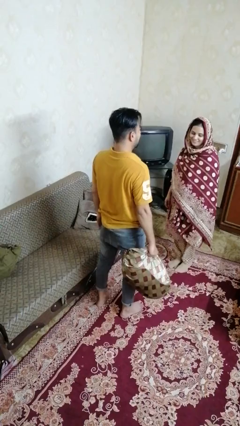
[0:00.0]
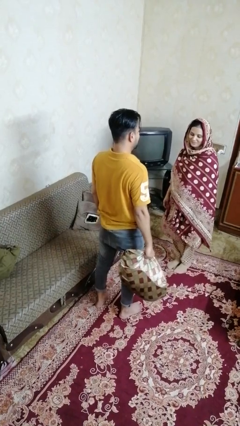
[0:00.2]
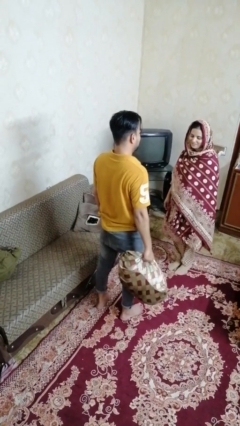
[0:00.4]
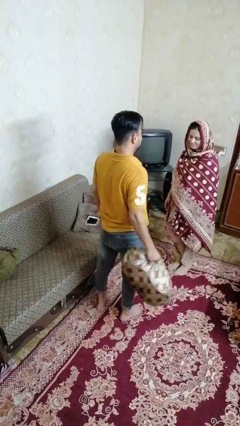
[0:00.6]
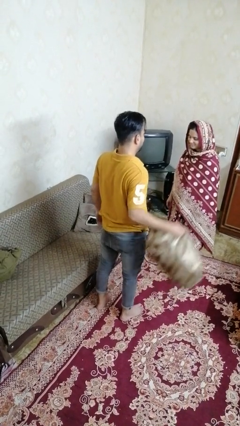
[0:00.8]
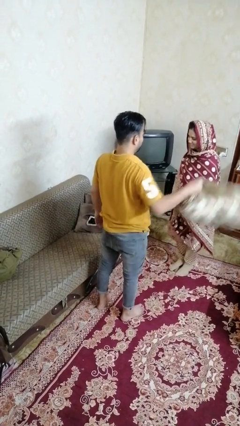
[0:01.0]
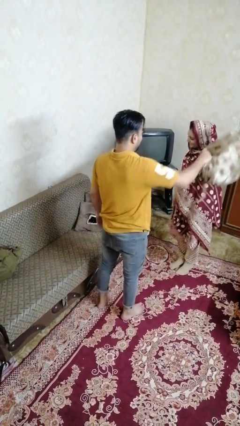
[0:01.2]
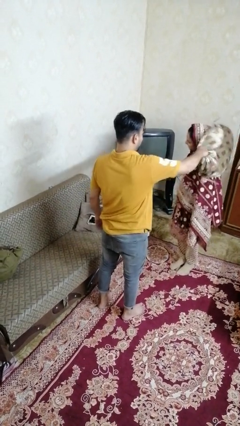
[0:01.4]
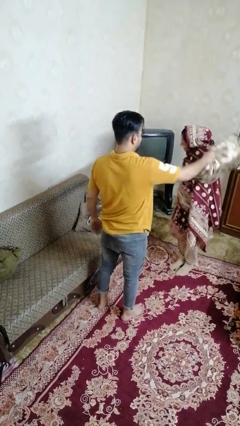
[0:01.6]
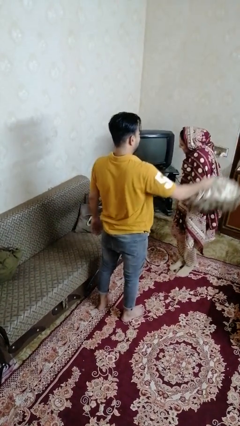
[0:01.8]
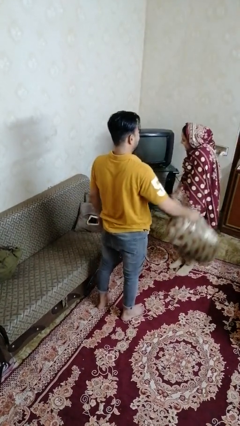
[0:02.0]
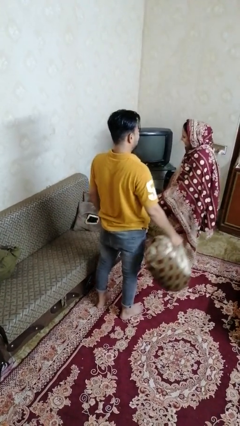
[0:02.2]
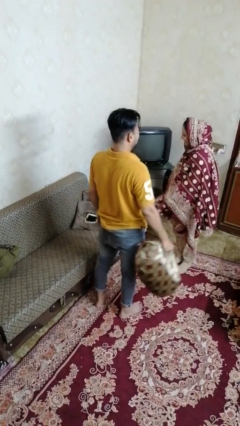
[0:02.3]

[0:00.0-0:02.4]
person hits person with pillow

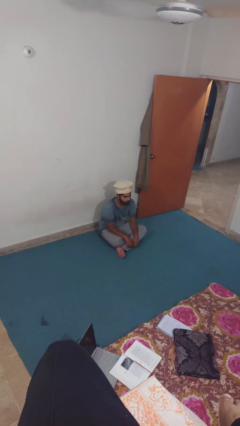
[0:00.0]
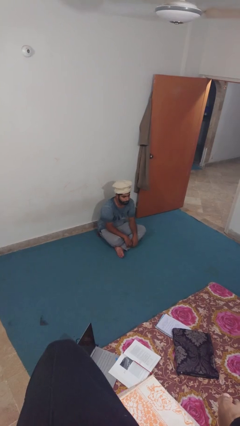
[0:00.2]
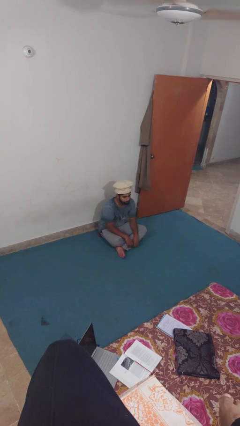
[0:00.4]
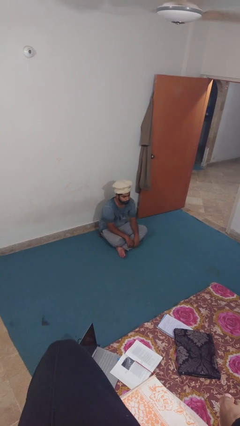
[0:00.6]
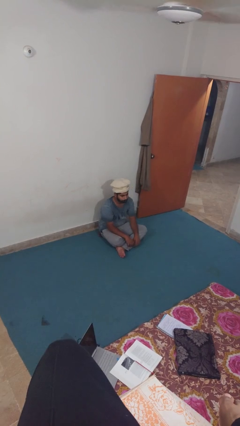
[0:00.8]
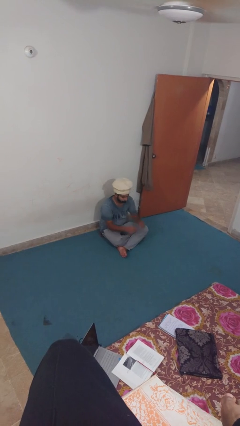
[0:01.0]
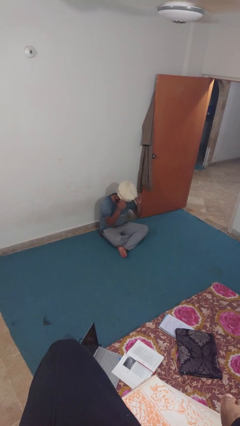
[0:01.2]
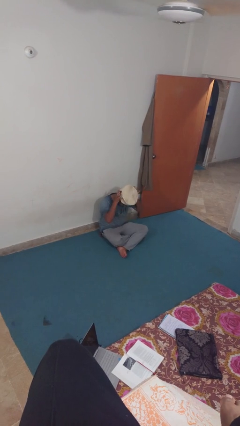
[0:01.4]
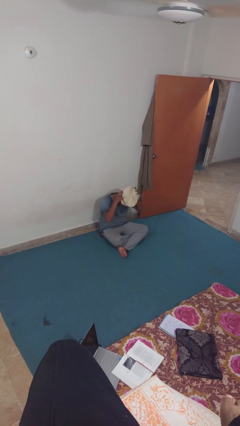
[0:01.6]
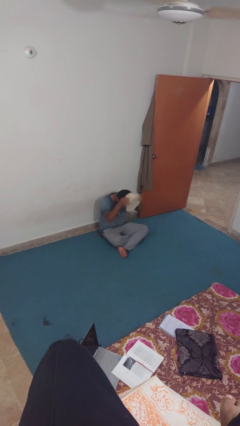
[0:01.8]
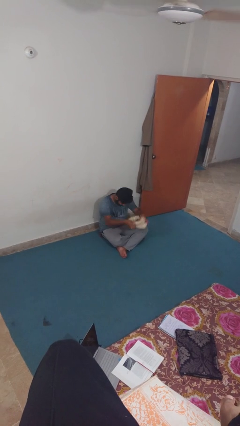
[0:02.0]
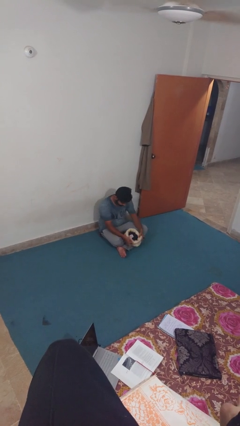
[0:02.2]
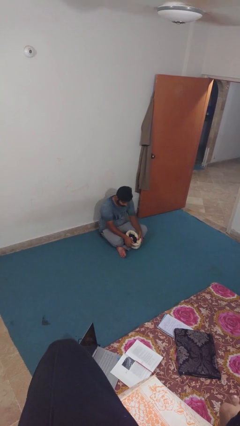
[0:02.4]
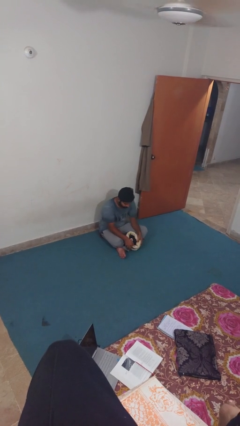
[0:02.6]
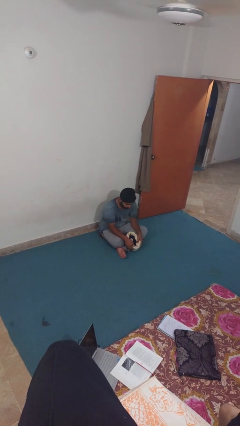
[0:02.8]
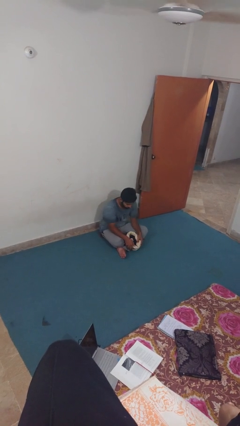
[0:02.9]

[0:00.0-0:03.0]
person takes off hat

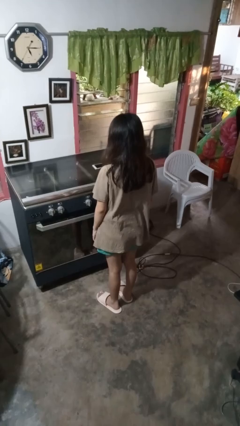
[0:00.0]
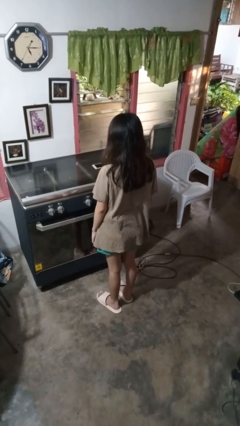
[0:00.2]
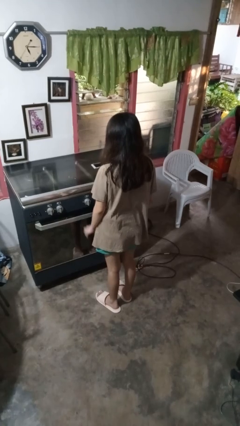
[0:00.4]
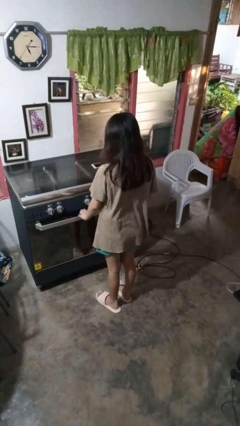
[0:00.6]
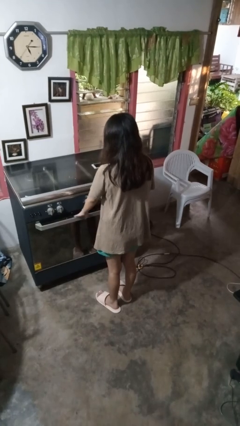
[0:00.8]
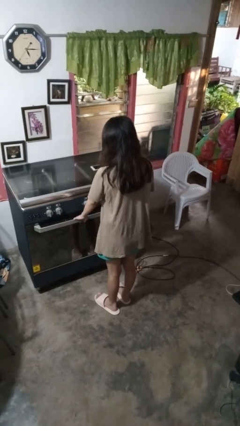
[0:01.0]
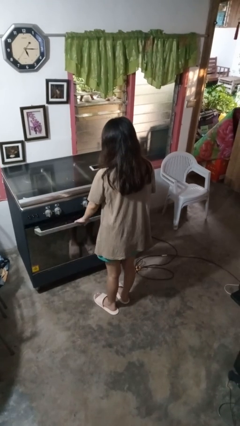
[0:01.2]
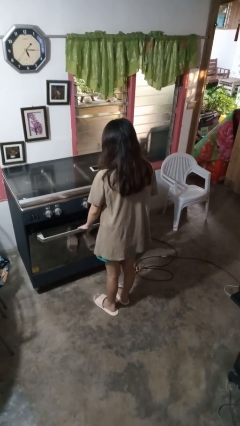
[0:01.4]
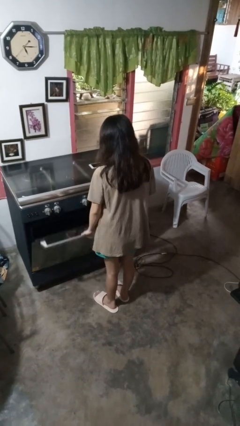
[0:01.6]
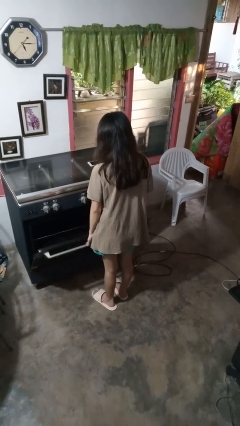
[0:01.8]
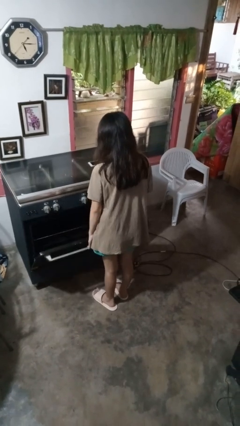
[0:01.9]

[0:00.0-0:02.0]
person opens oven door

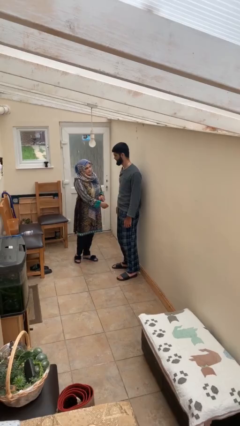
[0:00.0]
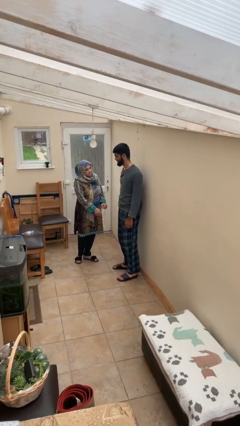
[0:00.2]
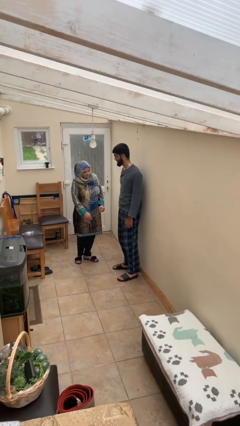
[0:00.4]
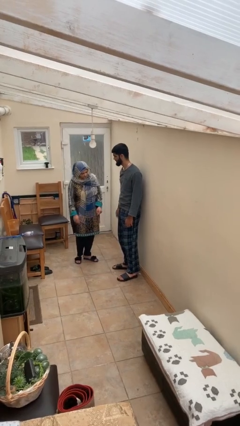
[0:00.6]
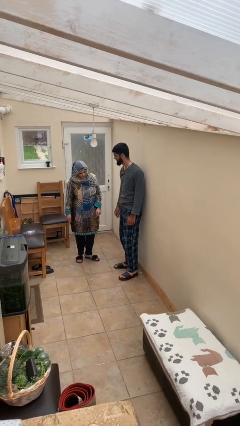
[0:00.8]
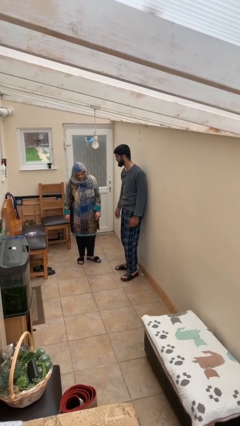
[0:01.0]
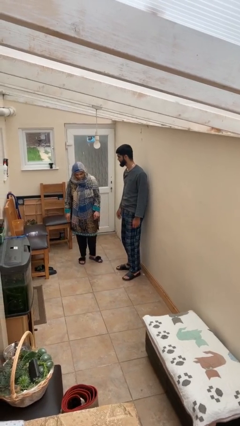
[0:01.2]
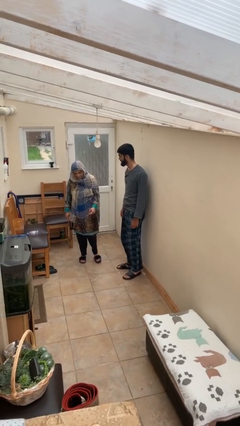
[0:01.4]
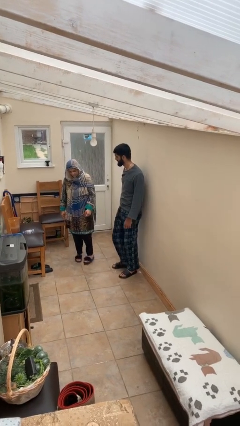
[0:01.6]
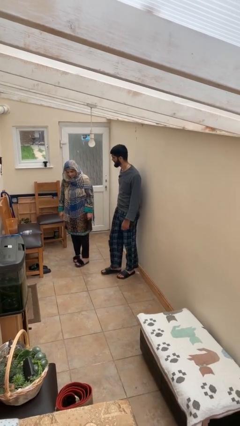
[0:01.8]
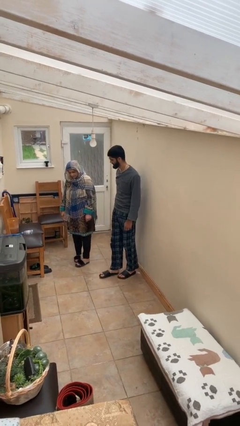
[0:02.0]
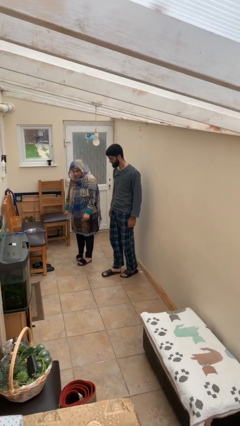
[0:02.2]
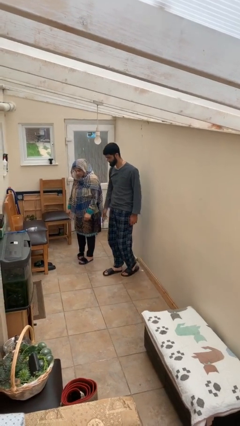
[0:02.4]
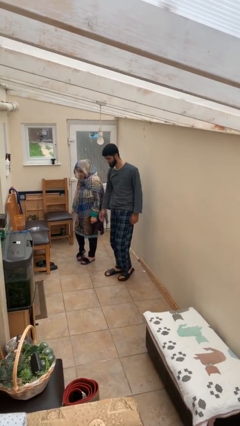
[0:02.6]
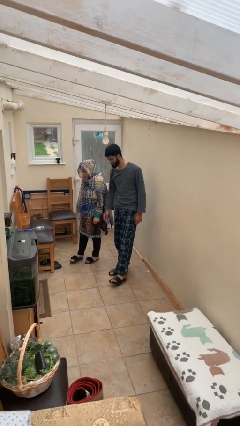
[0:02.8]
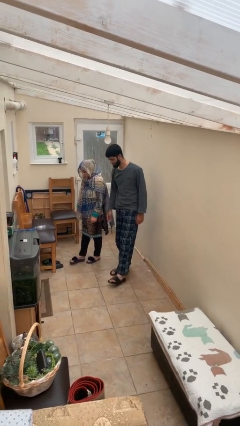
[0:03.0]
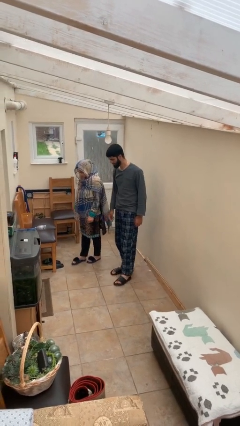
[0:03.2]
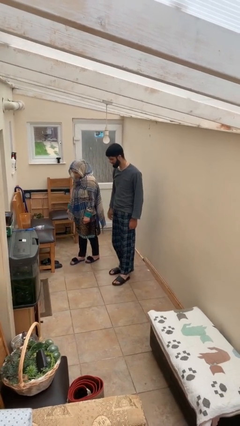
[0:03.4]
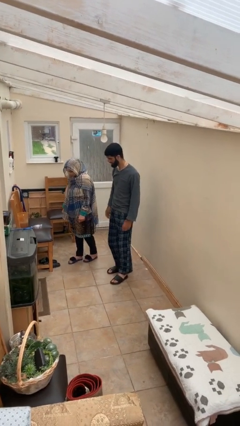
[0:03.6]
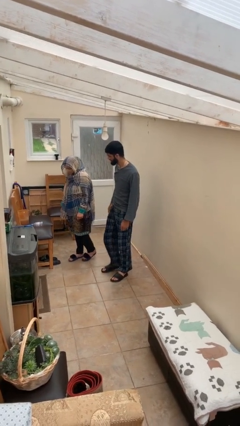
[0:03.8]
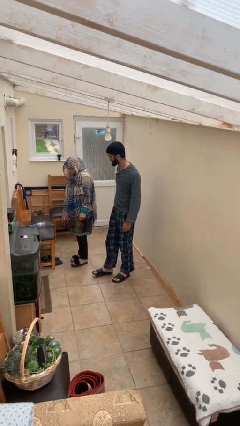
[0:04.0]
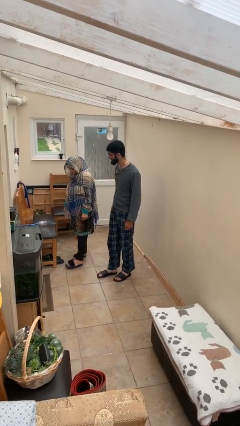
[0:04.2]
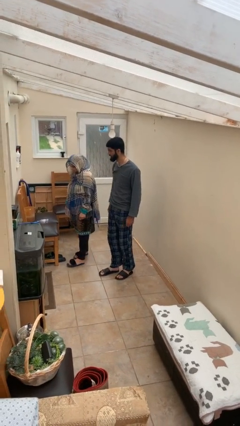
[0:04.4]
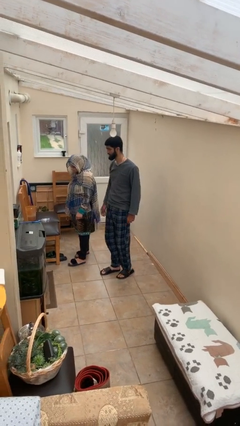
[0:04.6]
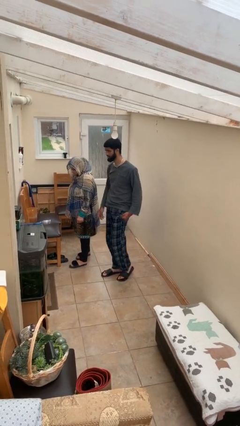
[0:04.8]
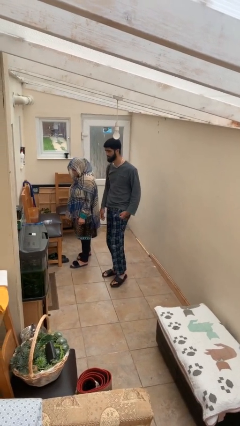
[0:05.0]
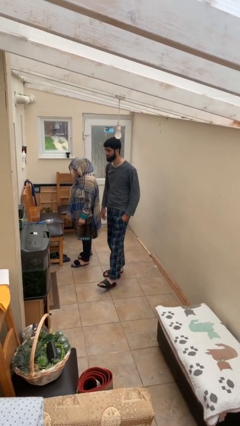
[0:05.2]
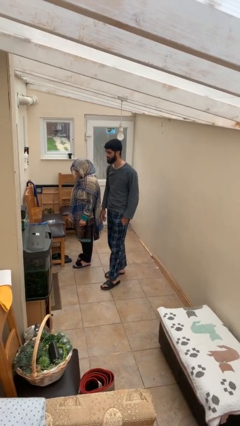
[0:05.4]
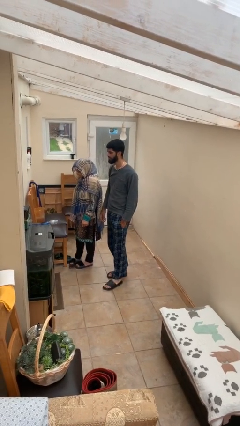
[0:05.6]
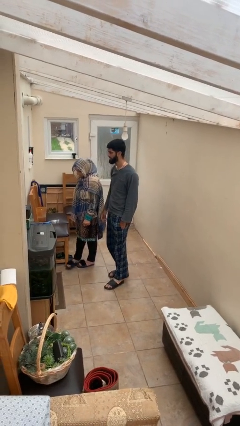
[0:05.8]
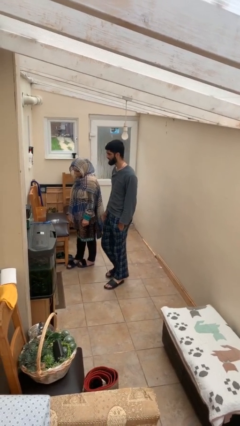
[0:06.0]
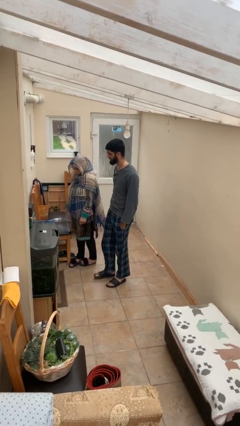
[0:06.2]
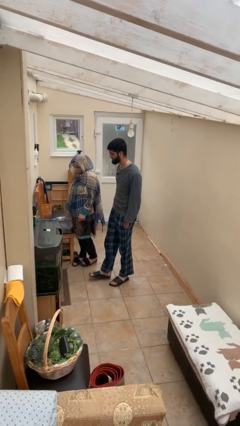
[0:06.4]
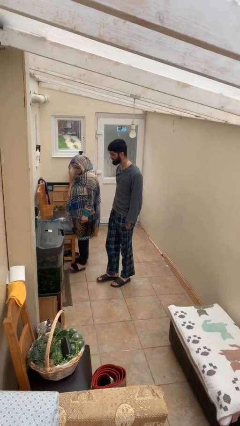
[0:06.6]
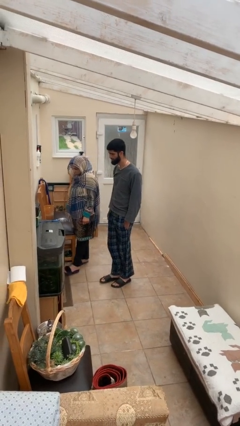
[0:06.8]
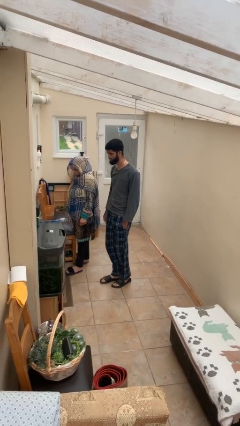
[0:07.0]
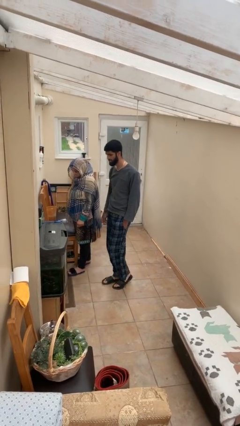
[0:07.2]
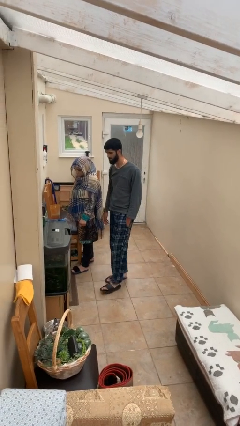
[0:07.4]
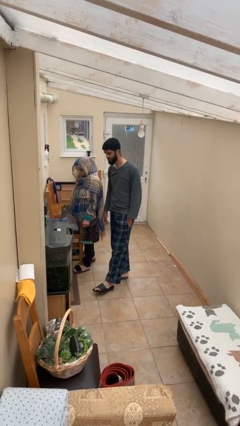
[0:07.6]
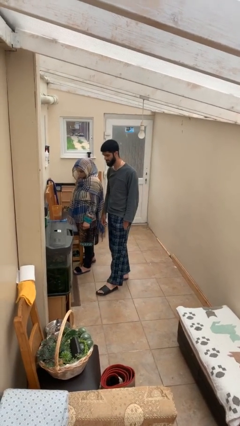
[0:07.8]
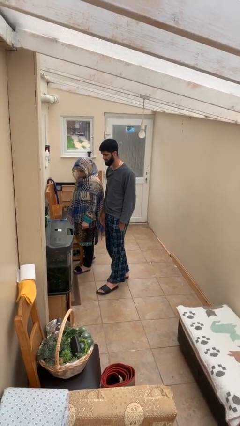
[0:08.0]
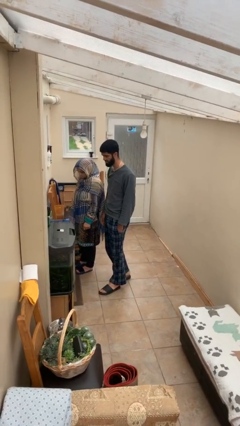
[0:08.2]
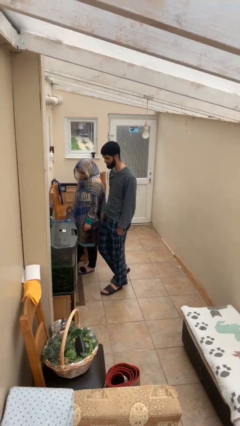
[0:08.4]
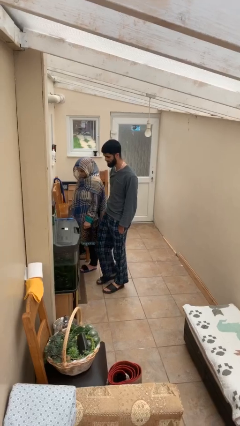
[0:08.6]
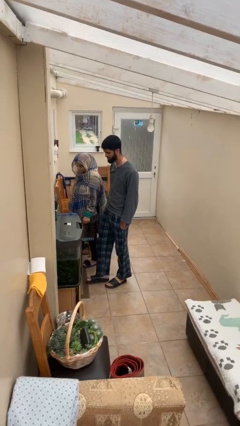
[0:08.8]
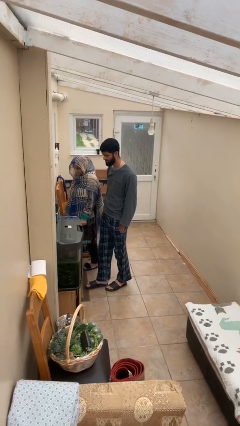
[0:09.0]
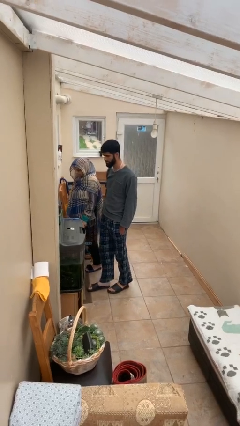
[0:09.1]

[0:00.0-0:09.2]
person talks to person

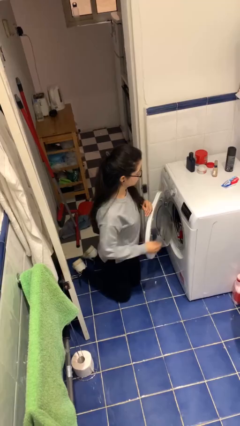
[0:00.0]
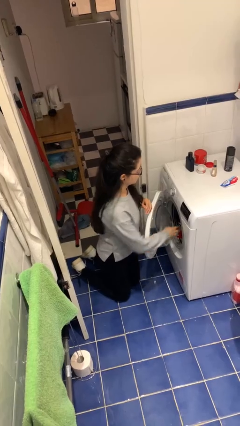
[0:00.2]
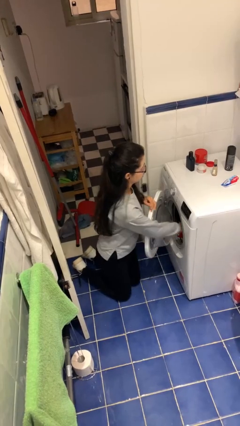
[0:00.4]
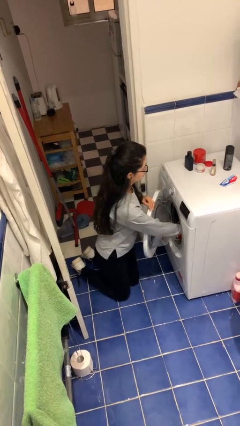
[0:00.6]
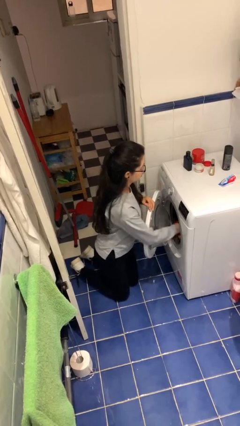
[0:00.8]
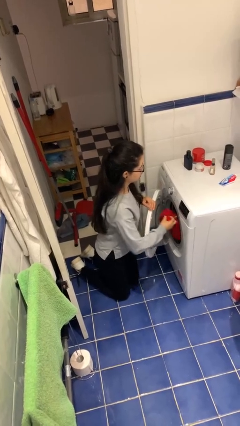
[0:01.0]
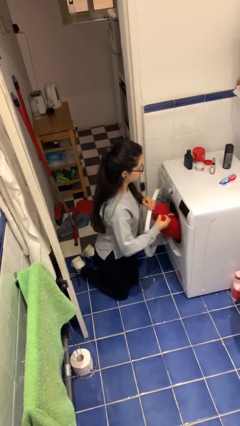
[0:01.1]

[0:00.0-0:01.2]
person unloads dryer
